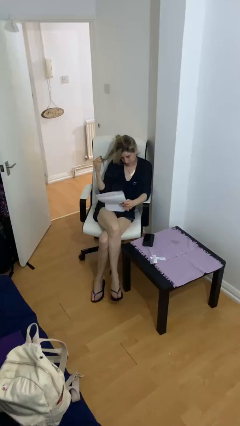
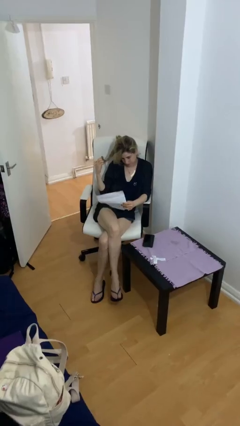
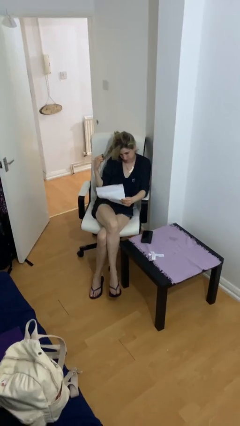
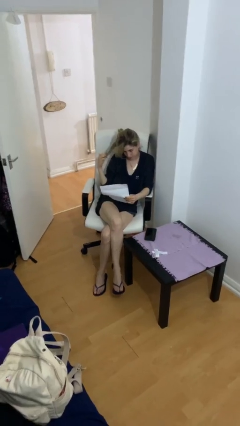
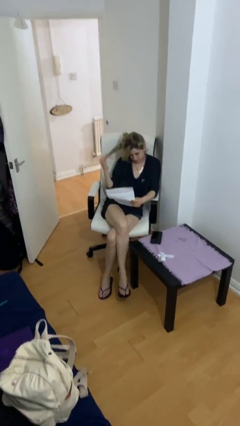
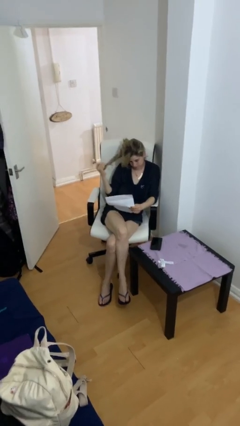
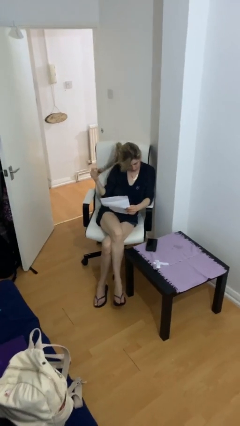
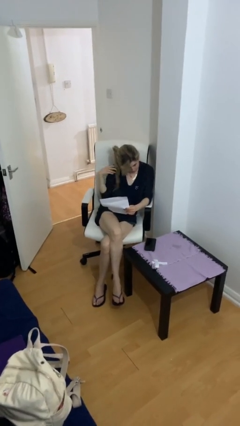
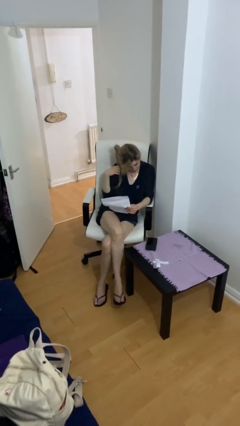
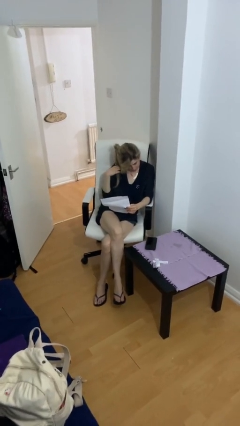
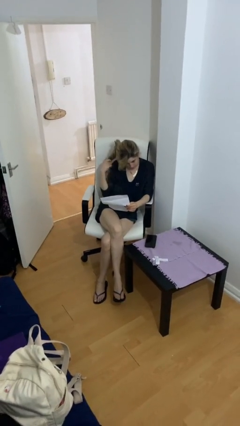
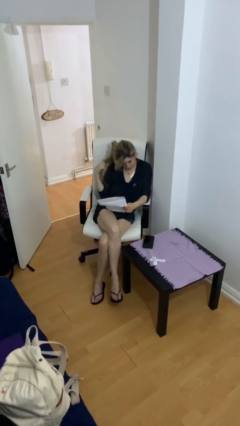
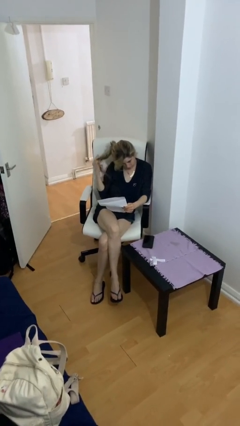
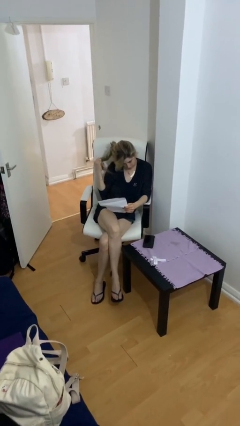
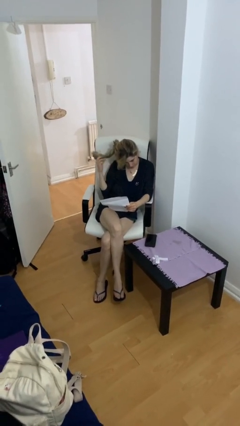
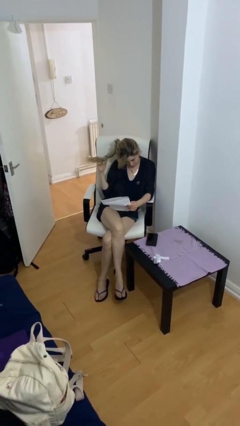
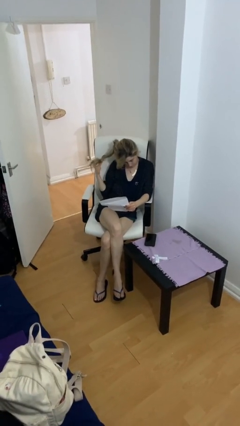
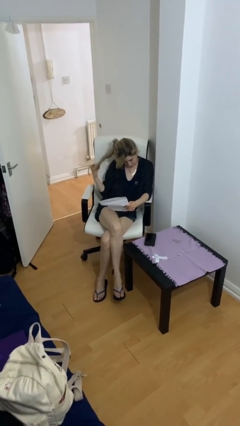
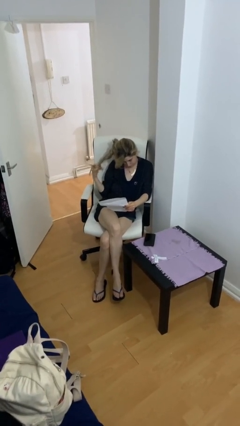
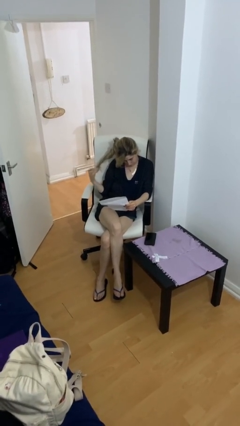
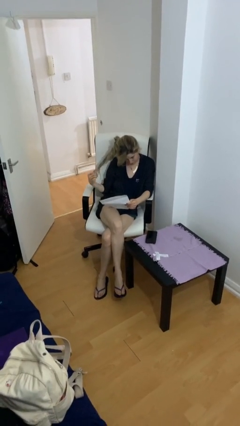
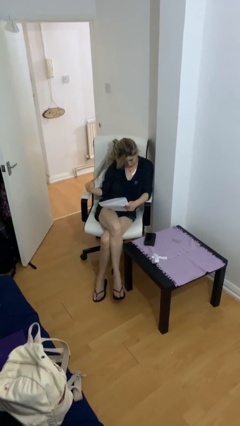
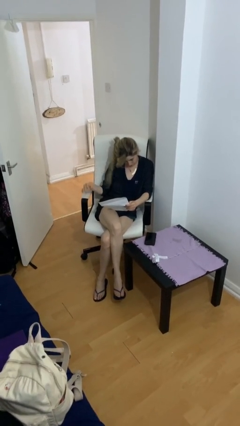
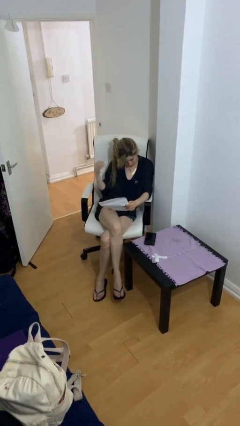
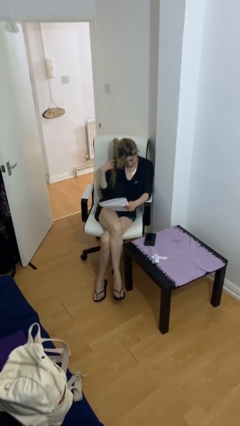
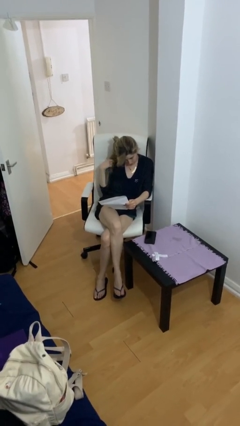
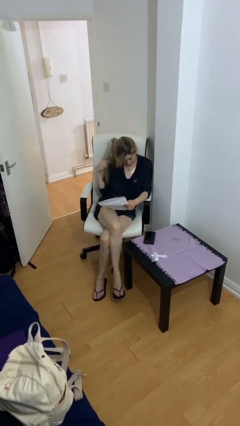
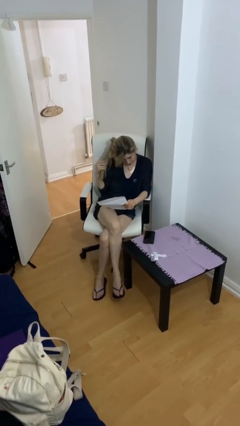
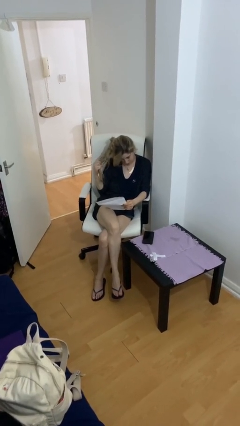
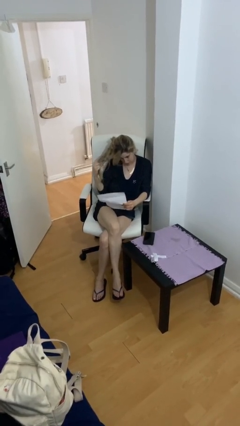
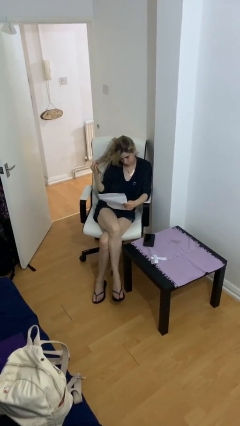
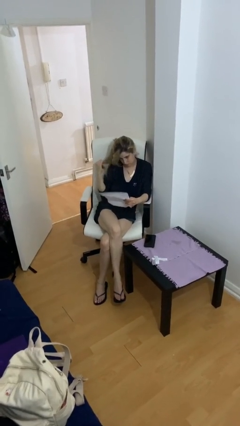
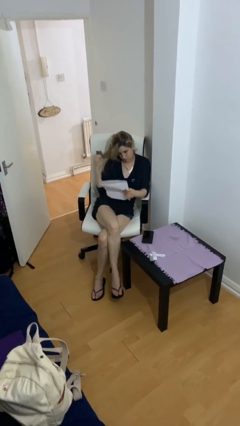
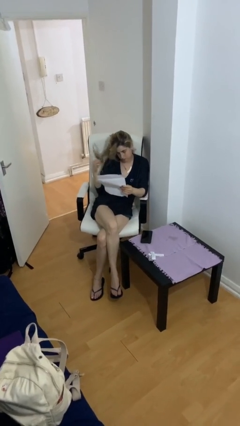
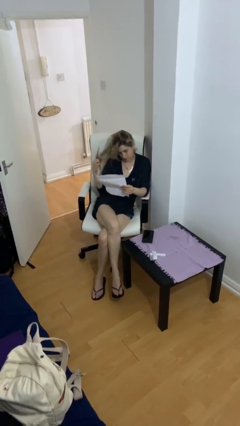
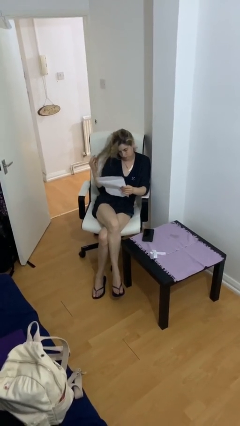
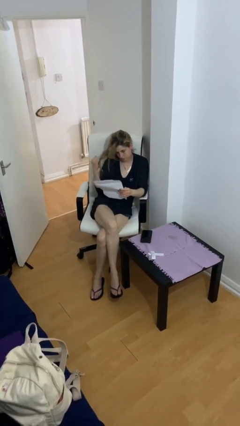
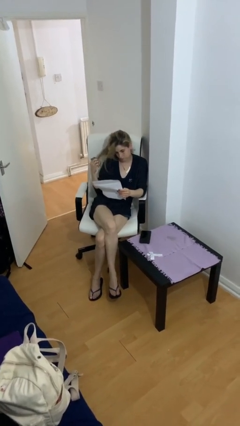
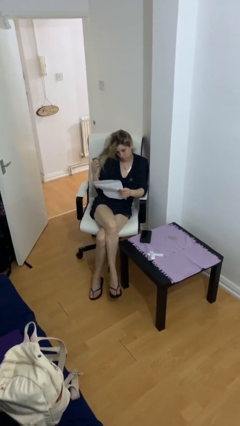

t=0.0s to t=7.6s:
person reads document

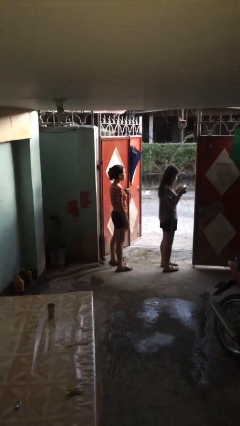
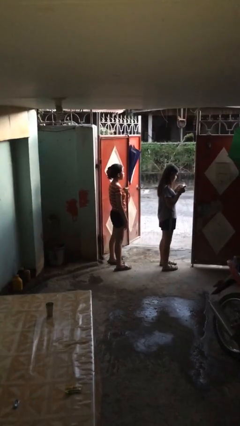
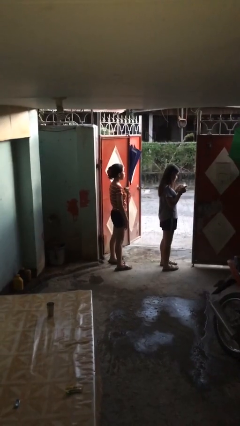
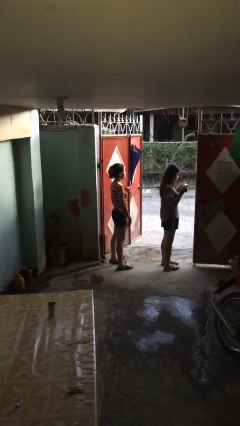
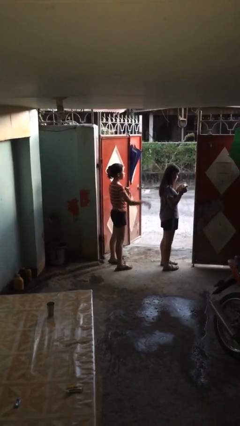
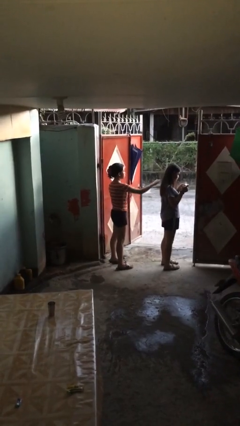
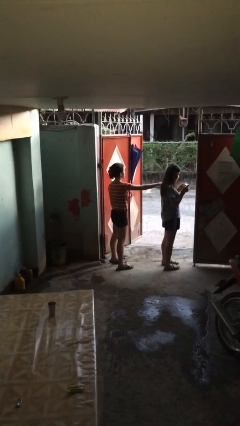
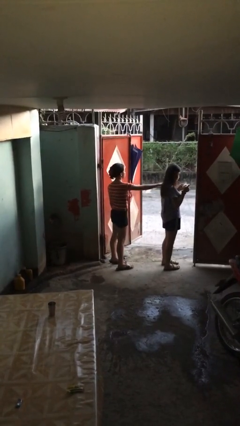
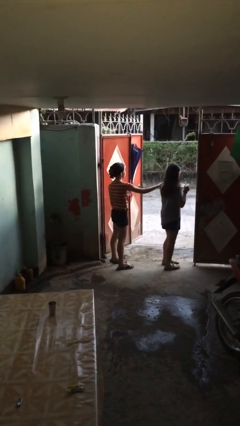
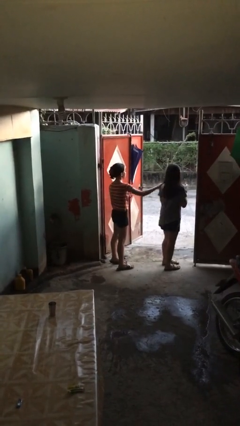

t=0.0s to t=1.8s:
person grabs person by shoulder

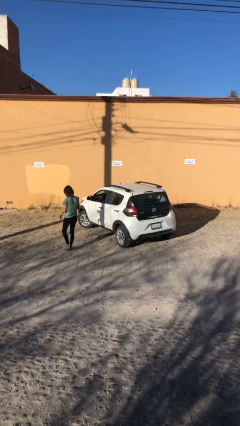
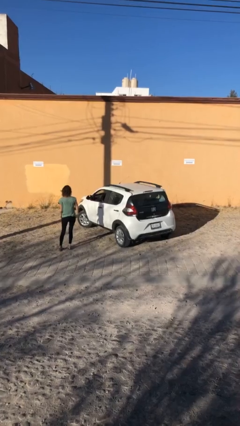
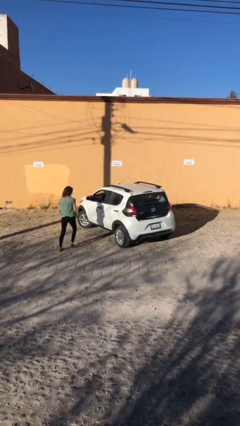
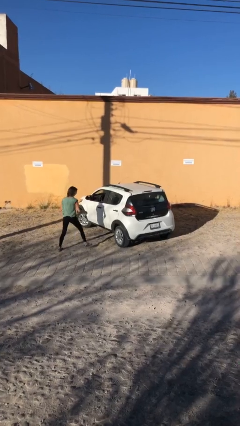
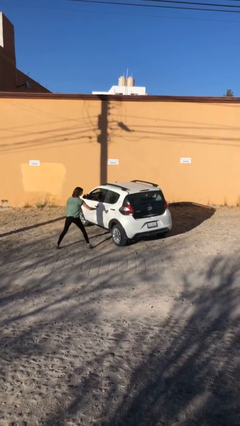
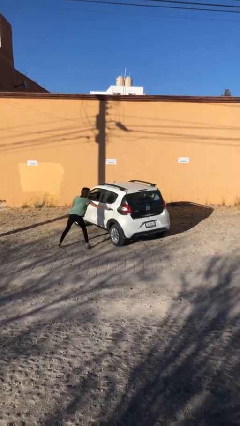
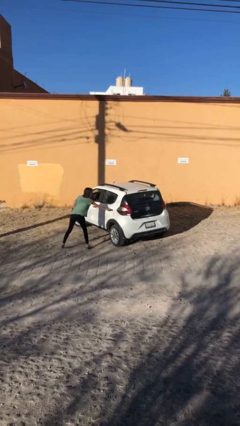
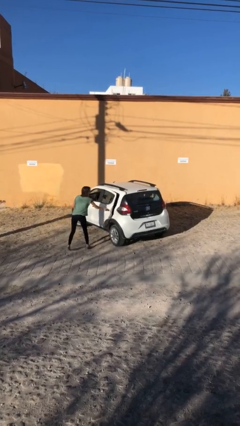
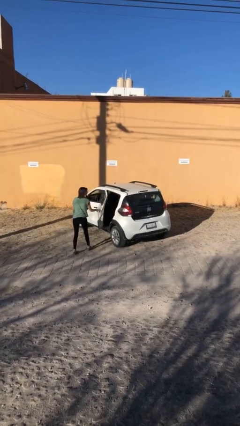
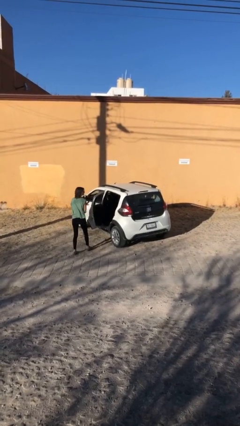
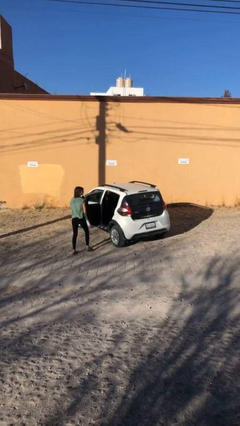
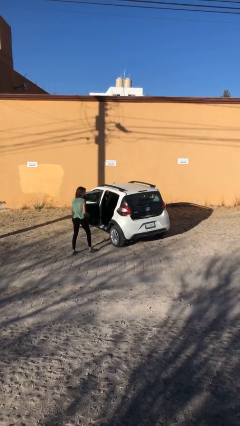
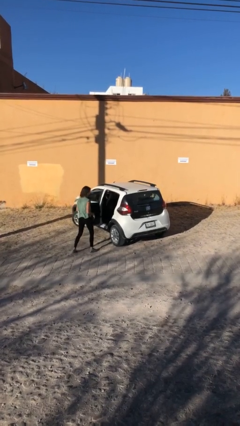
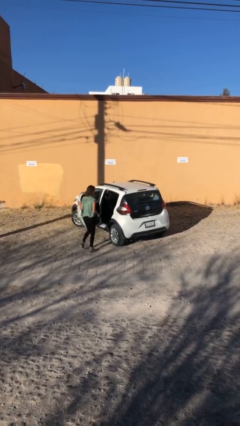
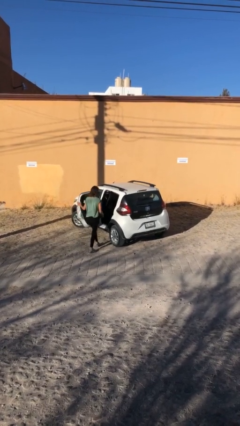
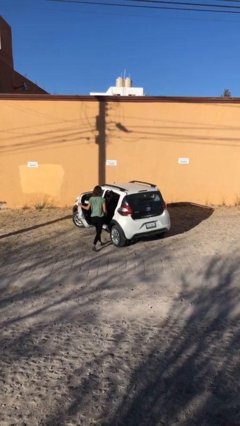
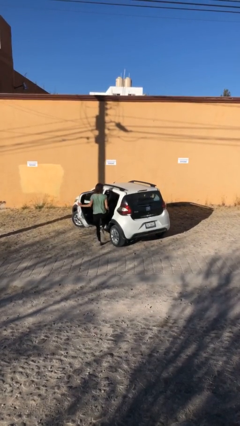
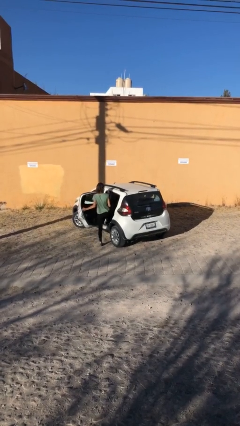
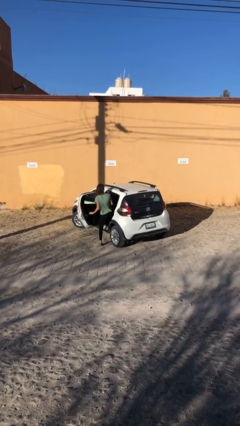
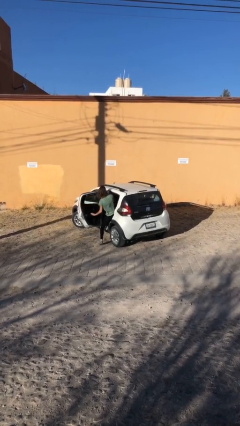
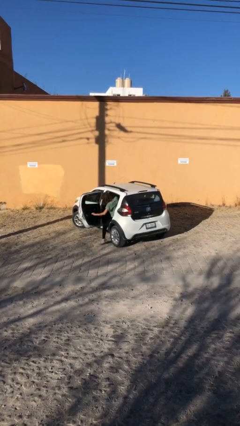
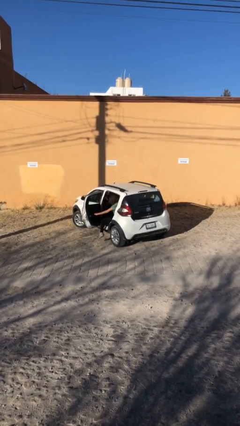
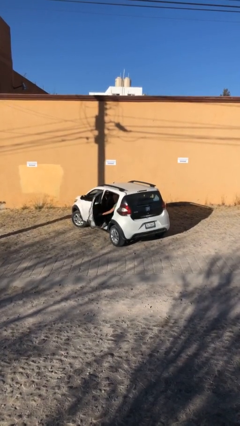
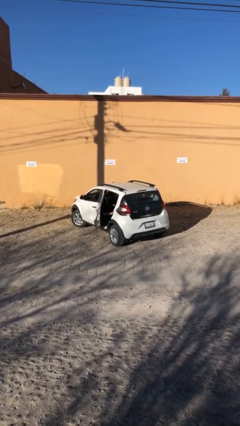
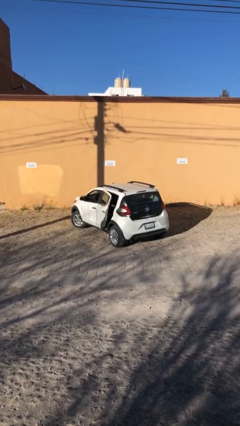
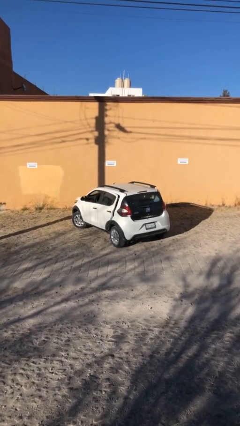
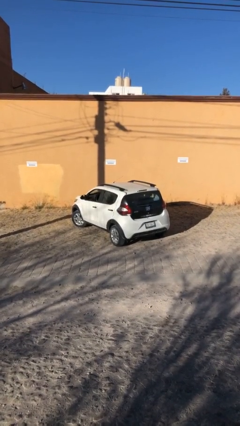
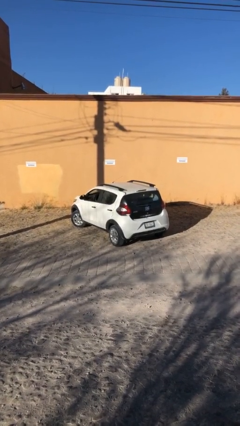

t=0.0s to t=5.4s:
car picks up person

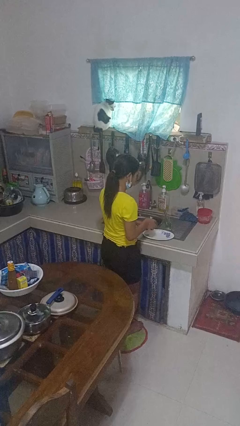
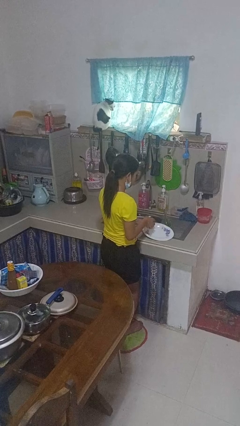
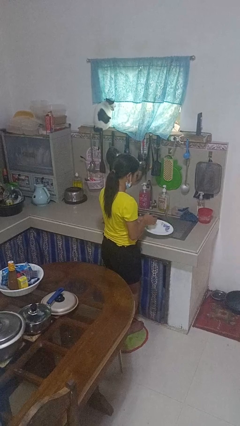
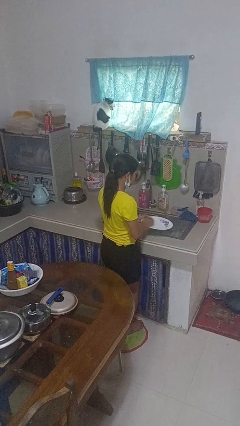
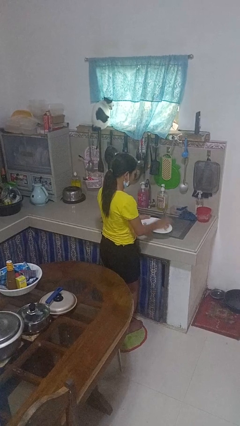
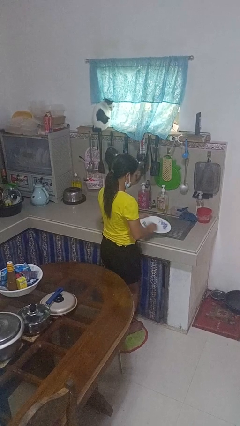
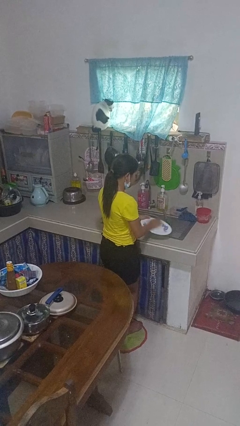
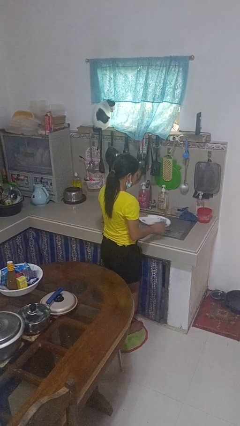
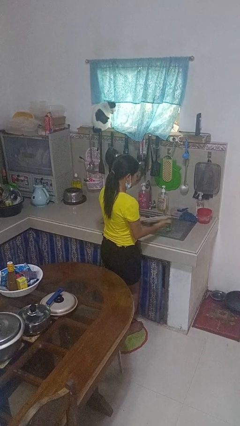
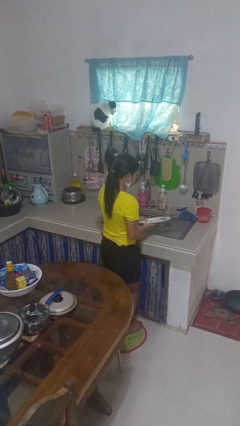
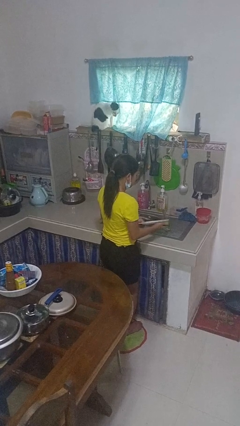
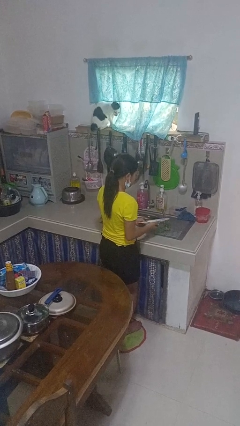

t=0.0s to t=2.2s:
person washes dish

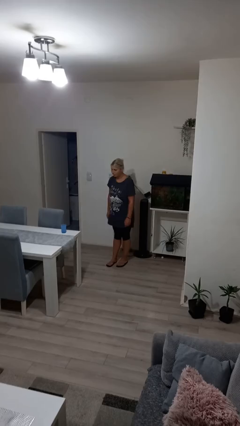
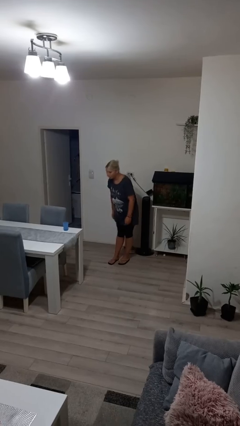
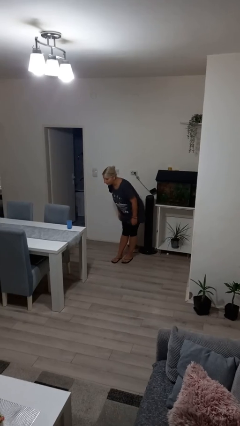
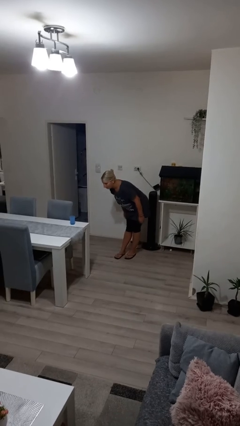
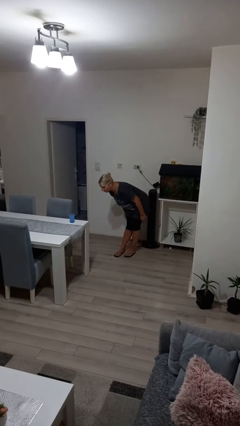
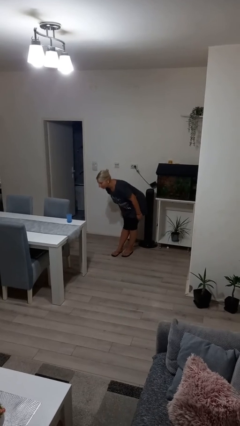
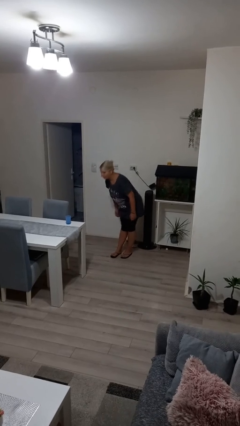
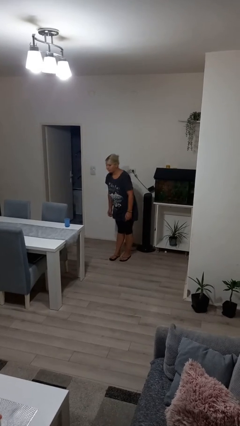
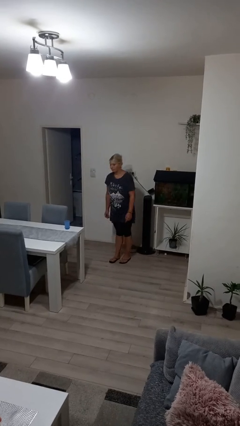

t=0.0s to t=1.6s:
person bows
